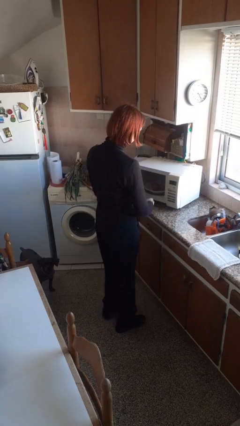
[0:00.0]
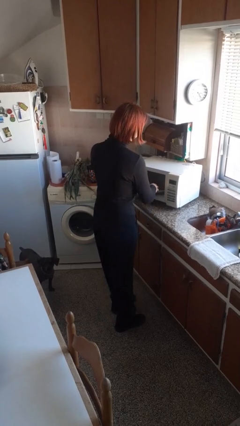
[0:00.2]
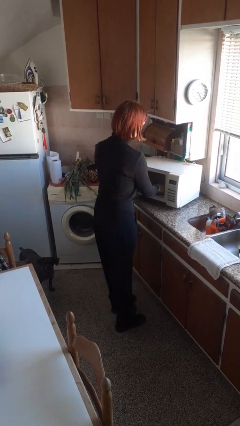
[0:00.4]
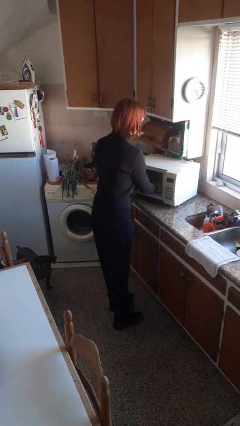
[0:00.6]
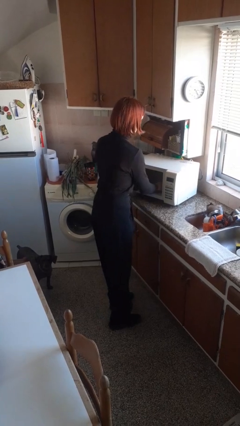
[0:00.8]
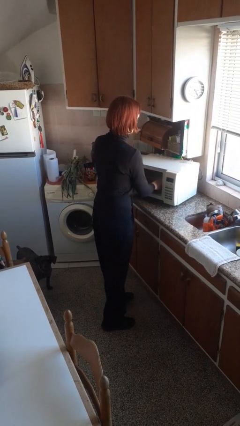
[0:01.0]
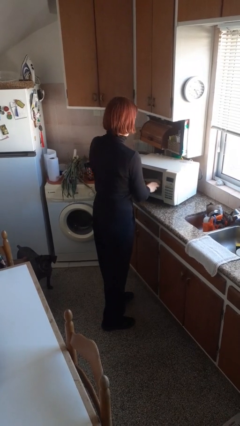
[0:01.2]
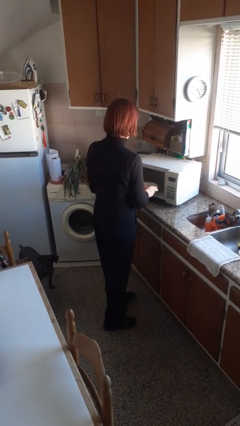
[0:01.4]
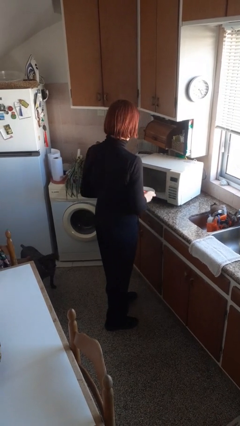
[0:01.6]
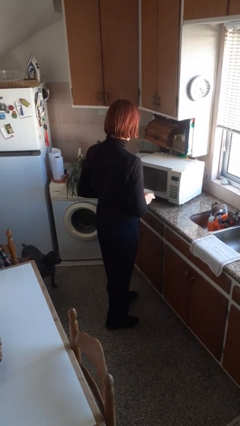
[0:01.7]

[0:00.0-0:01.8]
person takes object from microwave

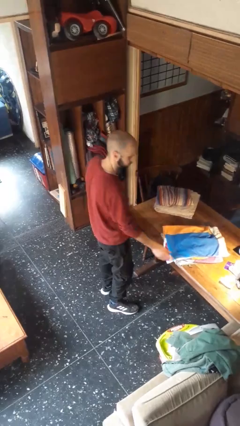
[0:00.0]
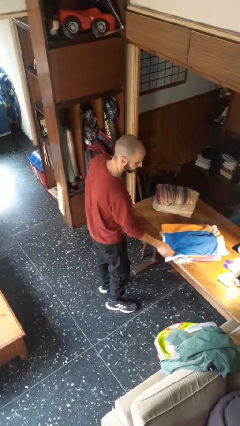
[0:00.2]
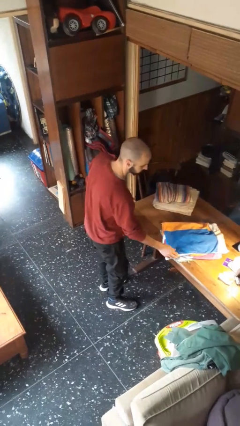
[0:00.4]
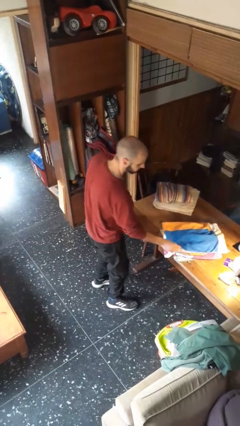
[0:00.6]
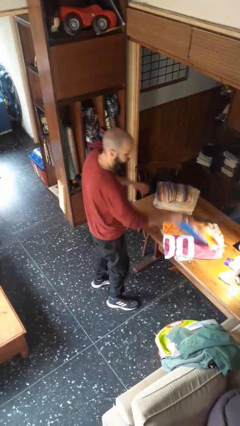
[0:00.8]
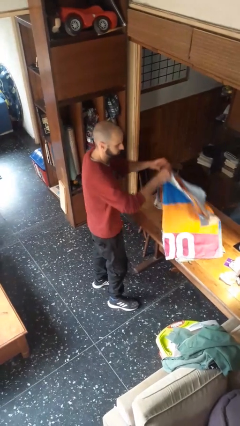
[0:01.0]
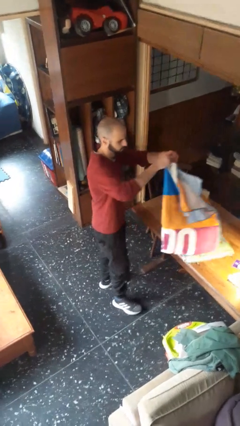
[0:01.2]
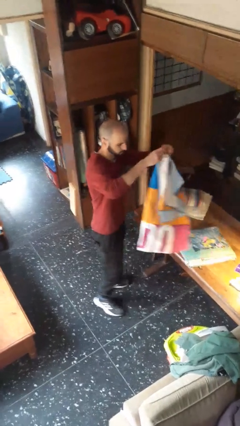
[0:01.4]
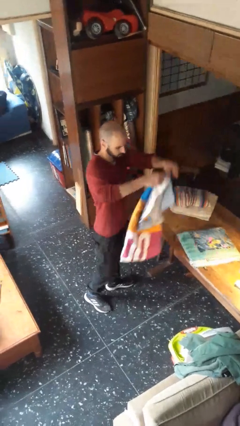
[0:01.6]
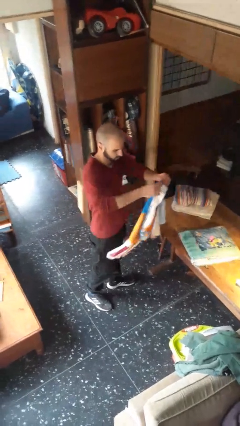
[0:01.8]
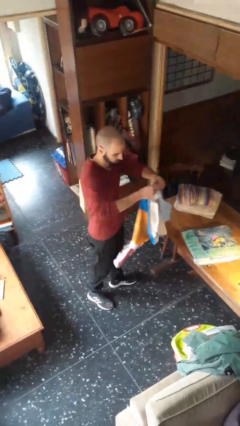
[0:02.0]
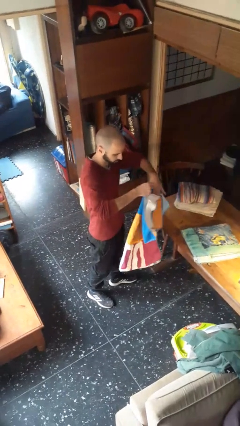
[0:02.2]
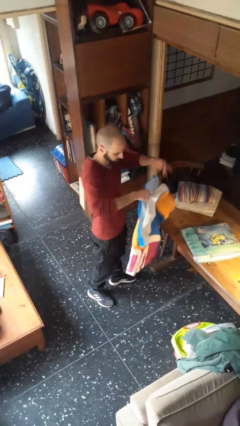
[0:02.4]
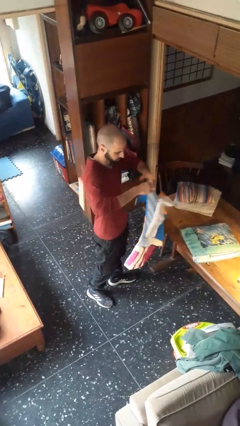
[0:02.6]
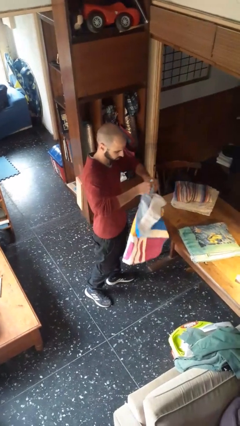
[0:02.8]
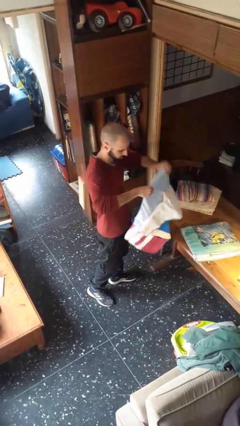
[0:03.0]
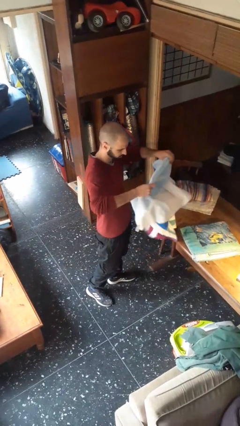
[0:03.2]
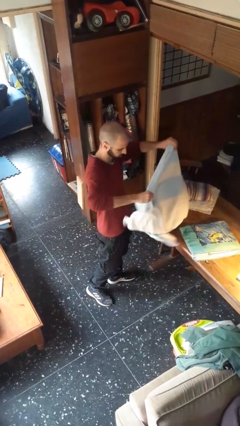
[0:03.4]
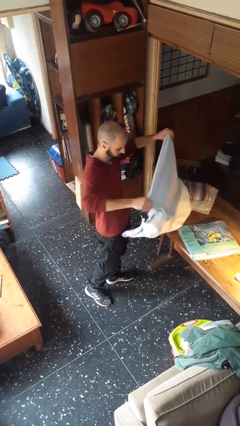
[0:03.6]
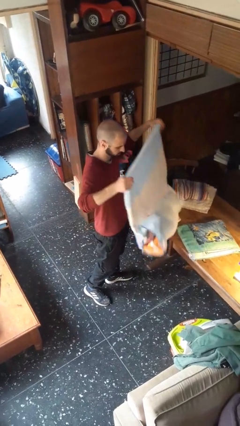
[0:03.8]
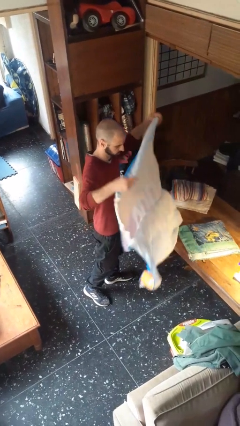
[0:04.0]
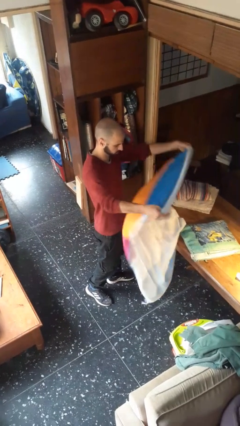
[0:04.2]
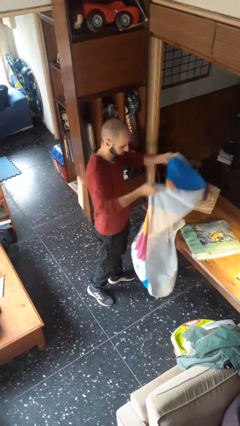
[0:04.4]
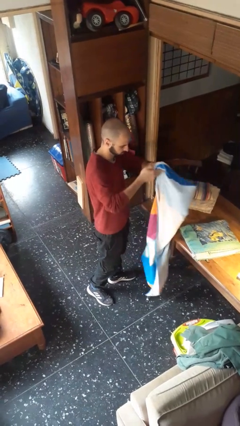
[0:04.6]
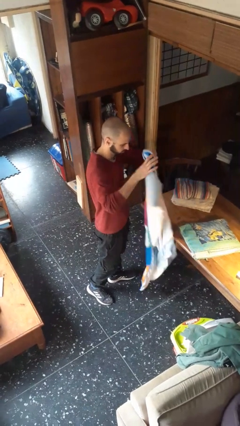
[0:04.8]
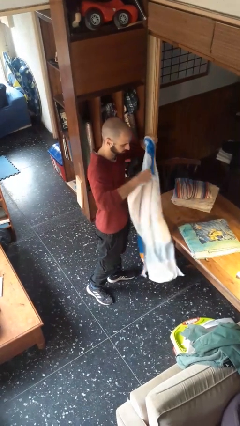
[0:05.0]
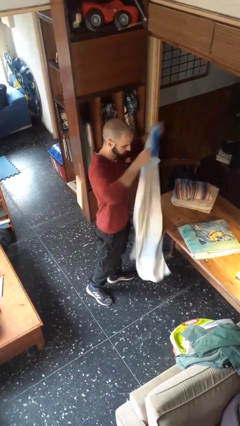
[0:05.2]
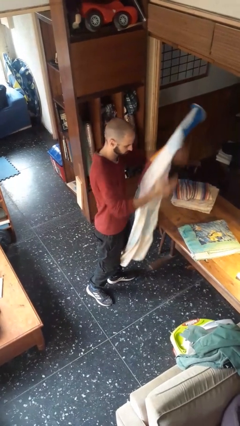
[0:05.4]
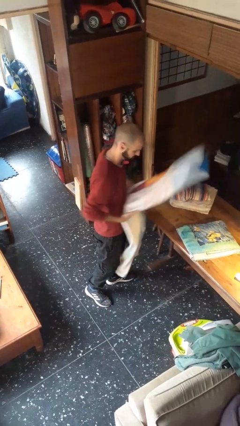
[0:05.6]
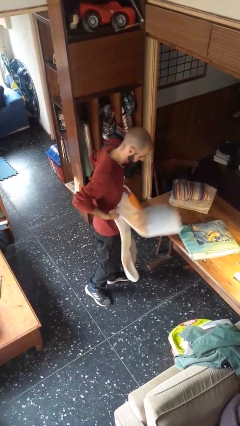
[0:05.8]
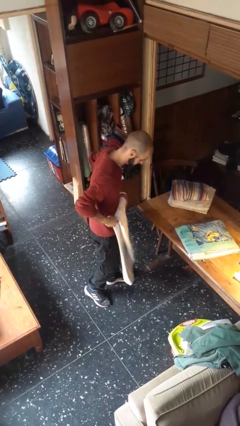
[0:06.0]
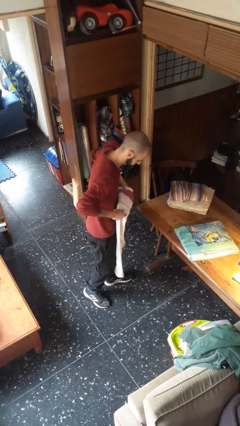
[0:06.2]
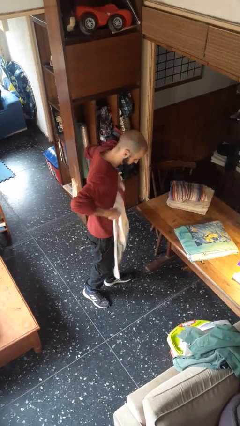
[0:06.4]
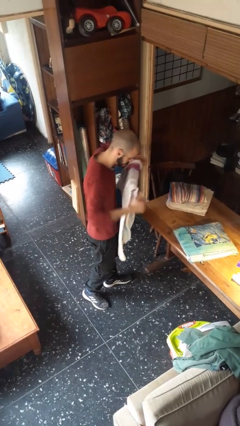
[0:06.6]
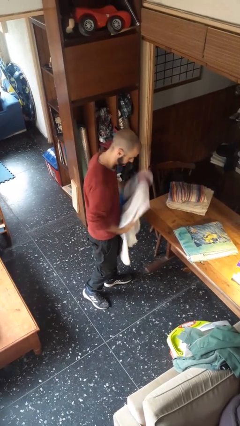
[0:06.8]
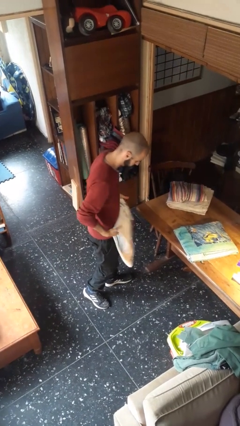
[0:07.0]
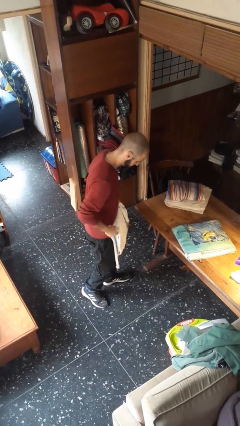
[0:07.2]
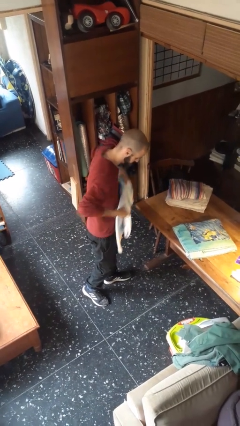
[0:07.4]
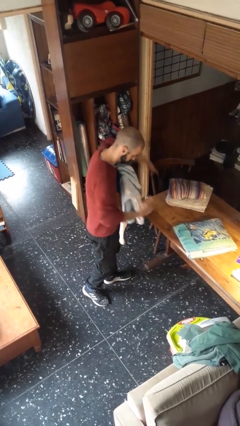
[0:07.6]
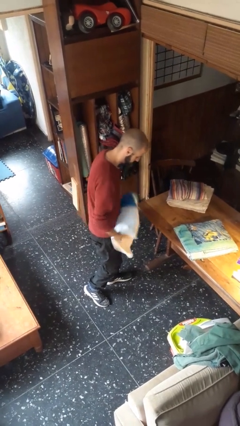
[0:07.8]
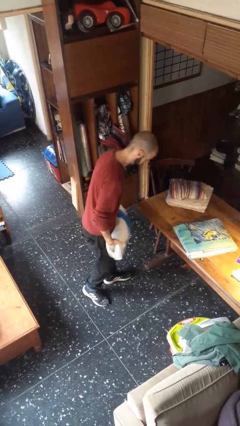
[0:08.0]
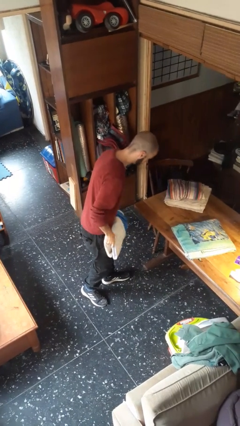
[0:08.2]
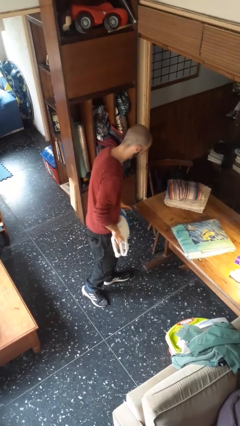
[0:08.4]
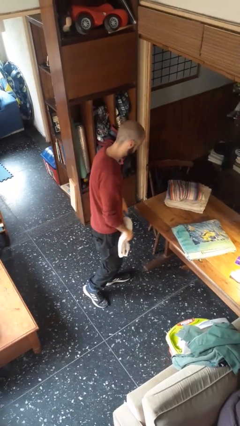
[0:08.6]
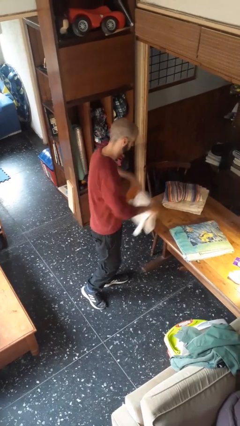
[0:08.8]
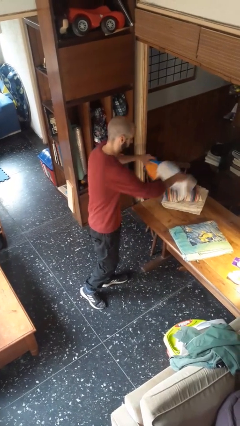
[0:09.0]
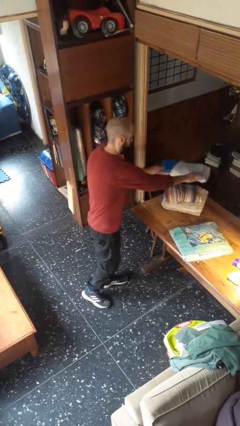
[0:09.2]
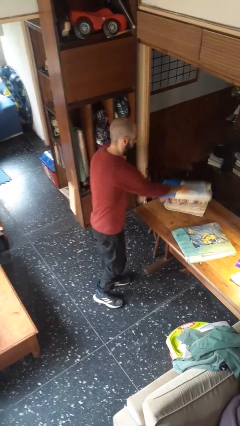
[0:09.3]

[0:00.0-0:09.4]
person folds towel

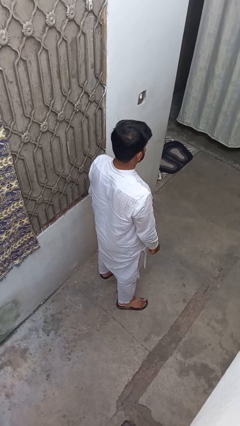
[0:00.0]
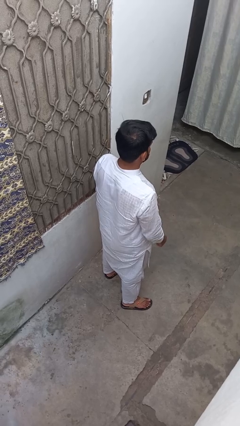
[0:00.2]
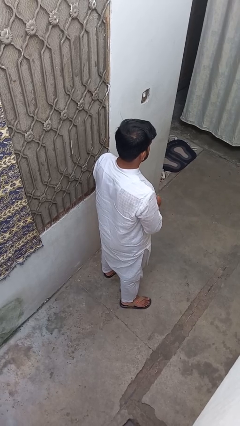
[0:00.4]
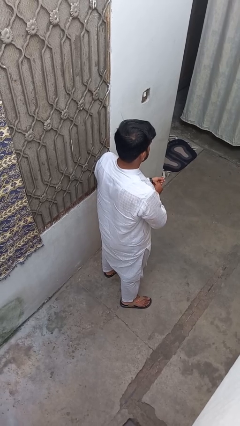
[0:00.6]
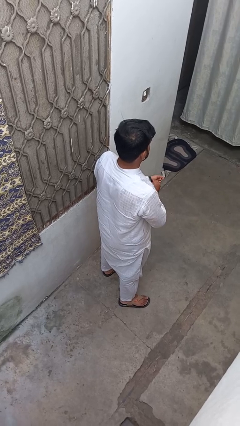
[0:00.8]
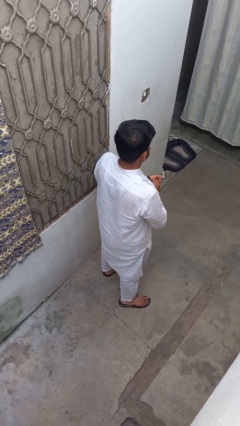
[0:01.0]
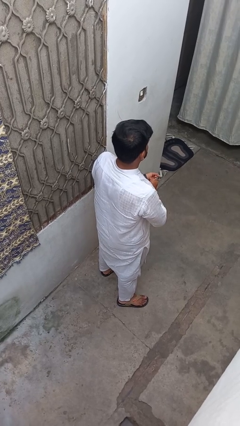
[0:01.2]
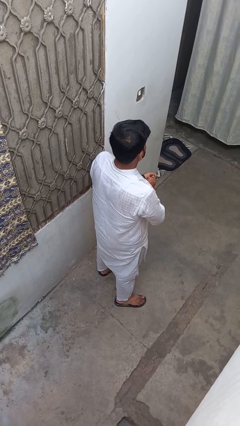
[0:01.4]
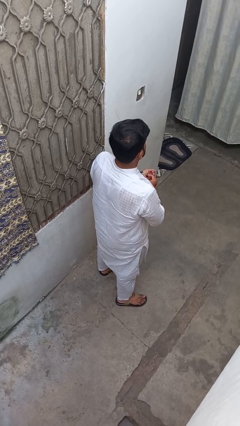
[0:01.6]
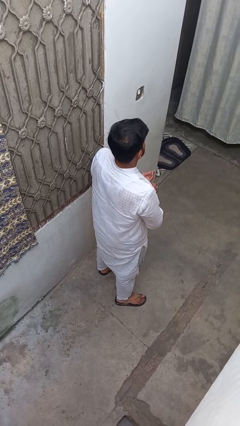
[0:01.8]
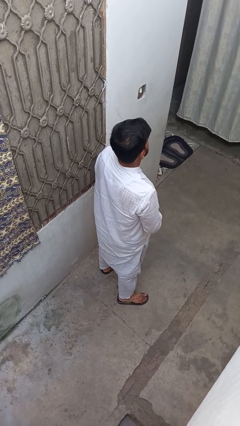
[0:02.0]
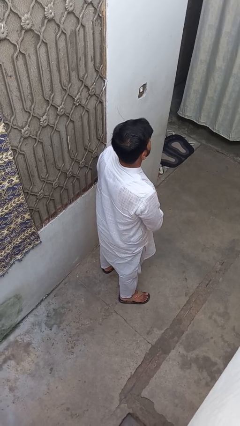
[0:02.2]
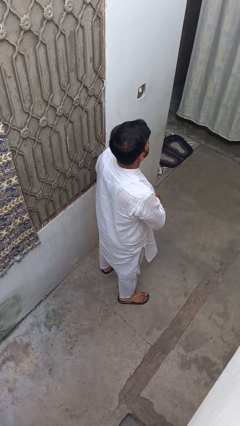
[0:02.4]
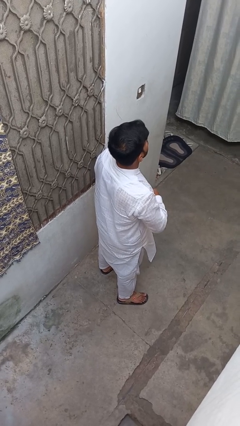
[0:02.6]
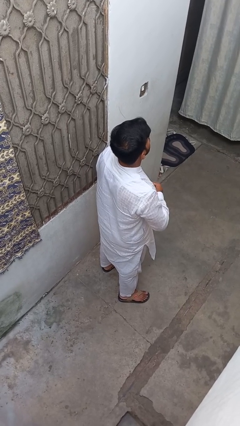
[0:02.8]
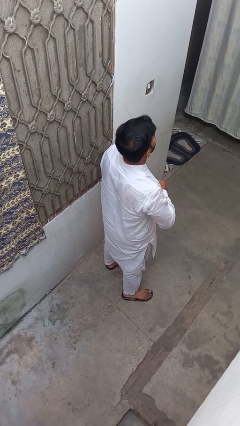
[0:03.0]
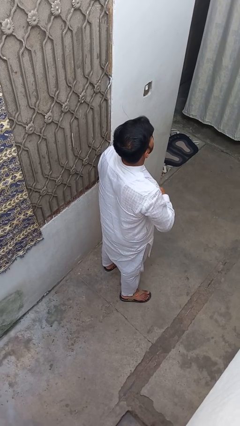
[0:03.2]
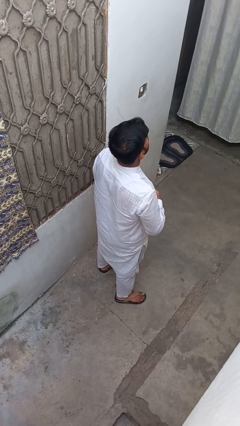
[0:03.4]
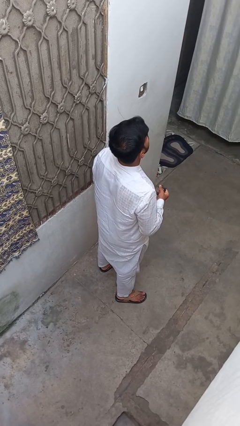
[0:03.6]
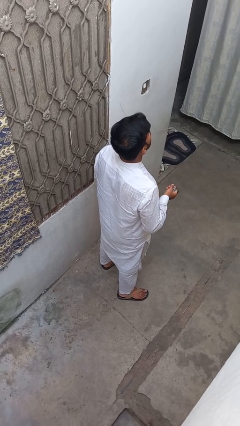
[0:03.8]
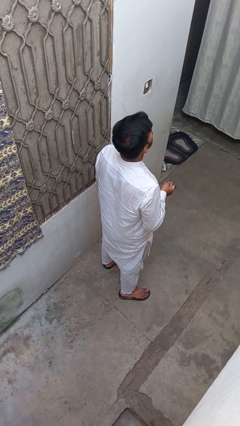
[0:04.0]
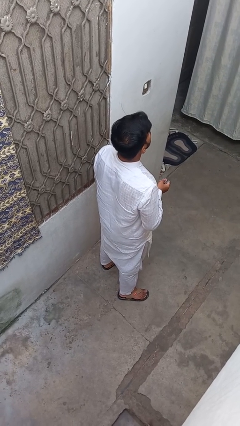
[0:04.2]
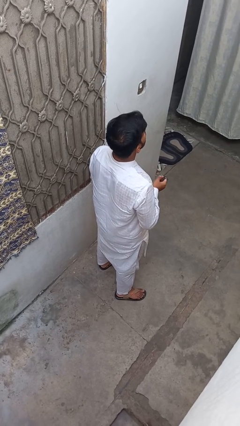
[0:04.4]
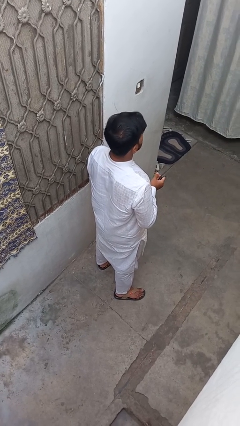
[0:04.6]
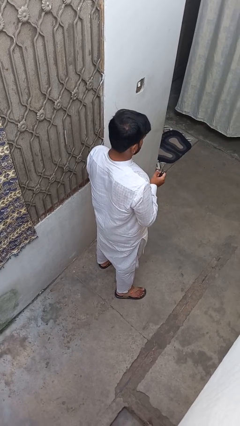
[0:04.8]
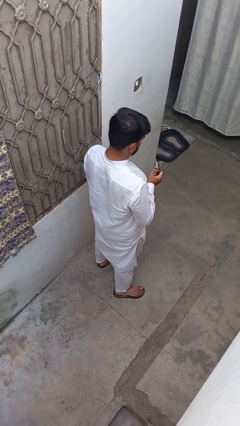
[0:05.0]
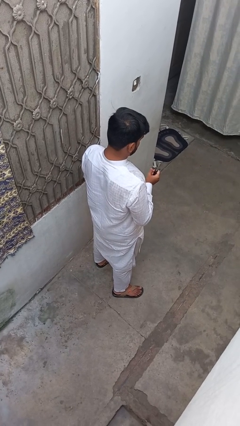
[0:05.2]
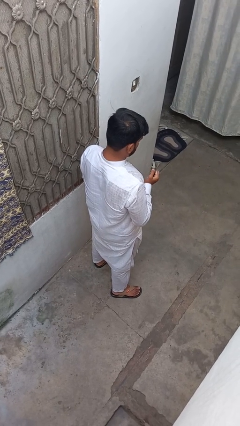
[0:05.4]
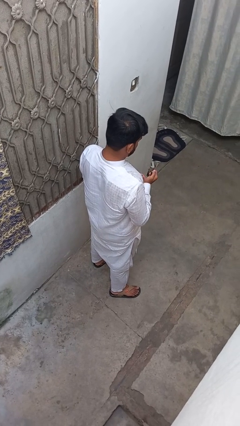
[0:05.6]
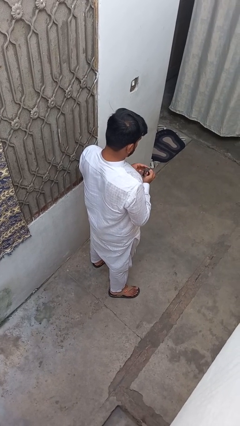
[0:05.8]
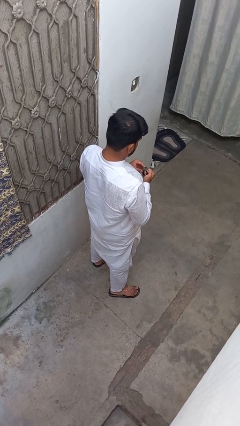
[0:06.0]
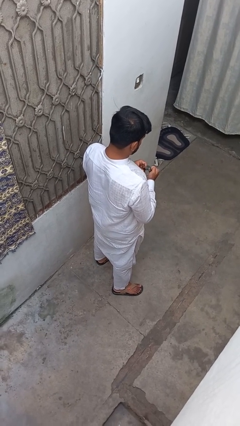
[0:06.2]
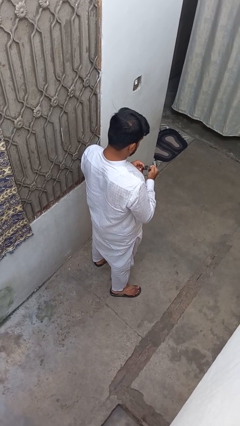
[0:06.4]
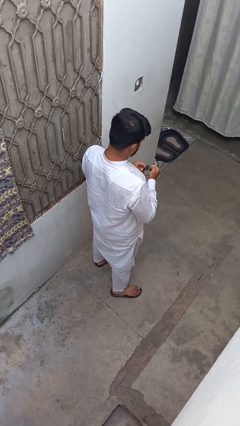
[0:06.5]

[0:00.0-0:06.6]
person takes off wristwatch

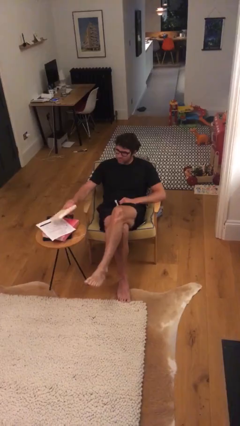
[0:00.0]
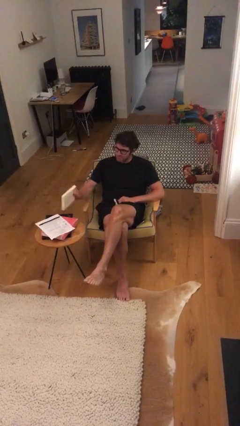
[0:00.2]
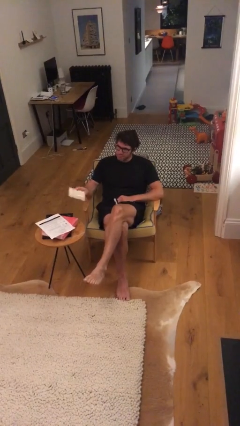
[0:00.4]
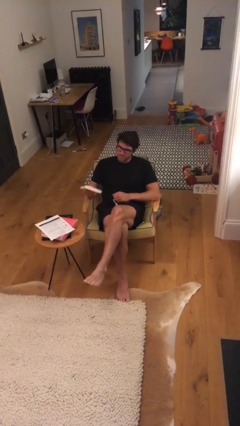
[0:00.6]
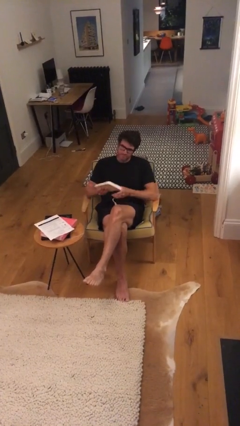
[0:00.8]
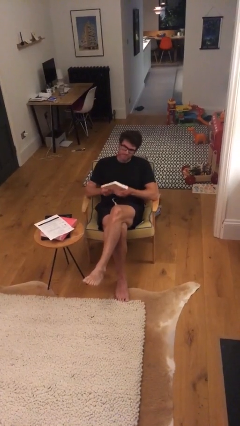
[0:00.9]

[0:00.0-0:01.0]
person picks up object from table
